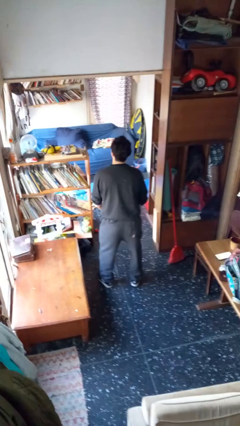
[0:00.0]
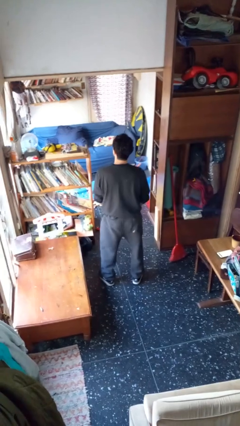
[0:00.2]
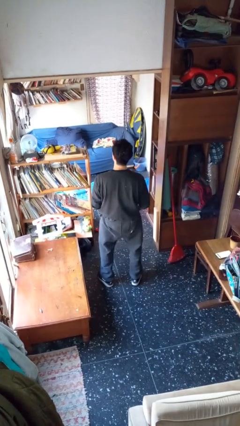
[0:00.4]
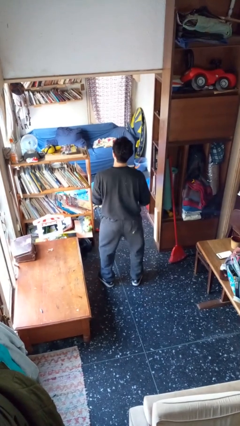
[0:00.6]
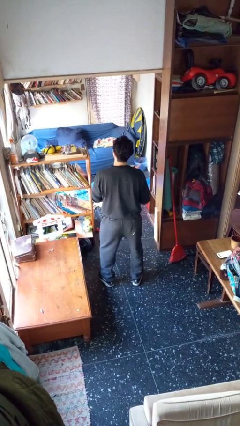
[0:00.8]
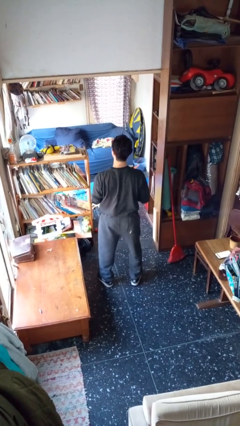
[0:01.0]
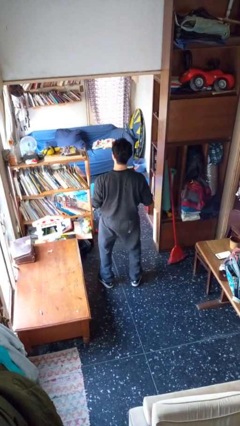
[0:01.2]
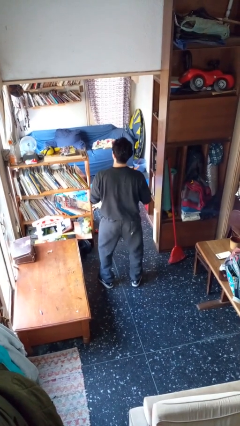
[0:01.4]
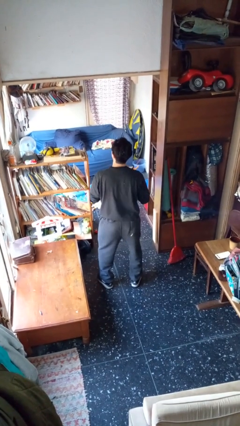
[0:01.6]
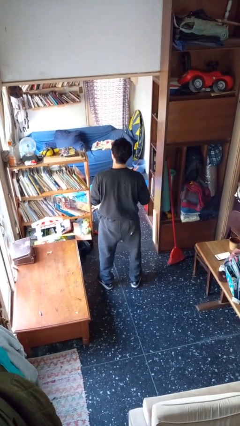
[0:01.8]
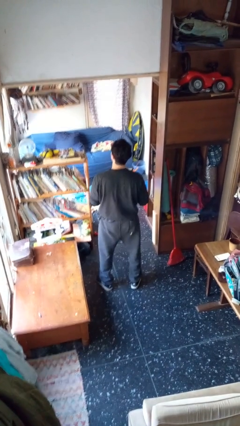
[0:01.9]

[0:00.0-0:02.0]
person wiggles hips

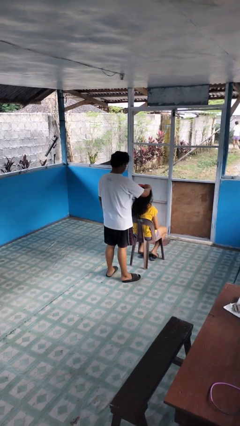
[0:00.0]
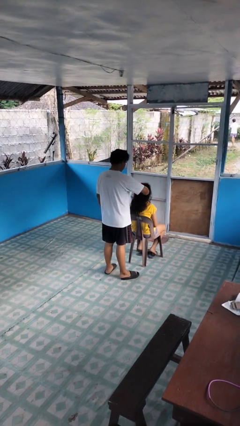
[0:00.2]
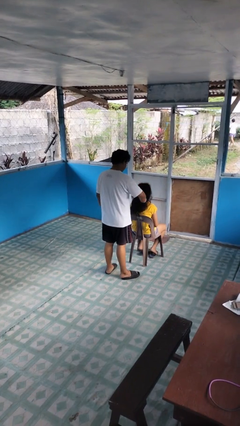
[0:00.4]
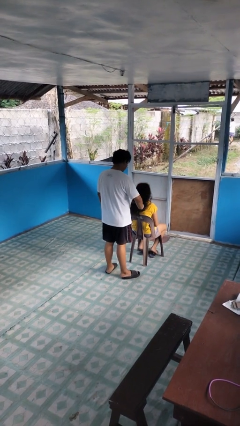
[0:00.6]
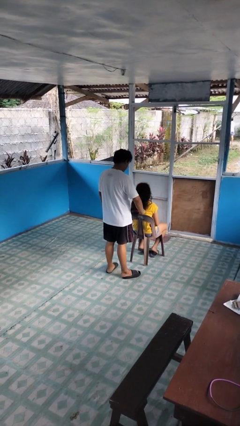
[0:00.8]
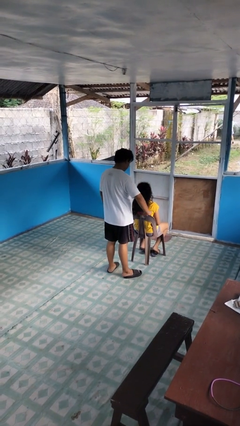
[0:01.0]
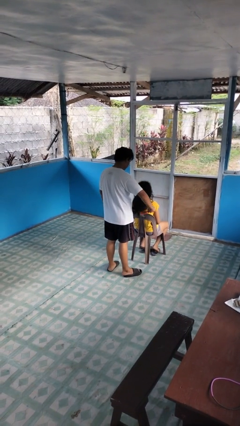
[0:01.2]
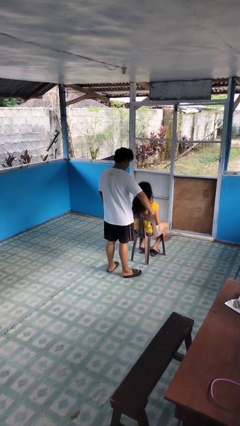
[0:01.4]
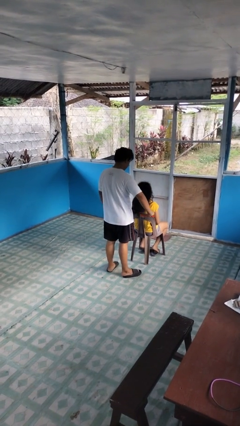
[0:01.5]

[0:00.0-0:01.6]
person brushes hair of person

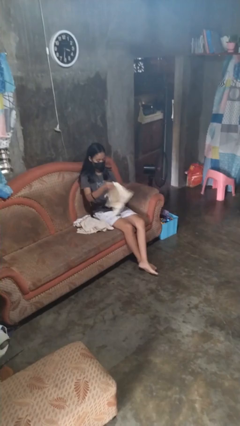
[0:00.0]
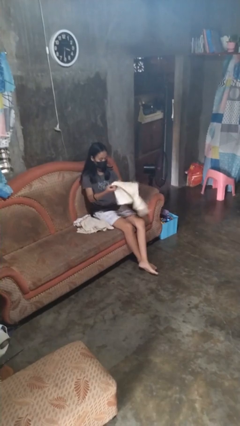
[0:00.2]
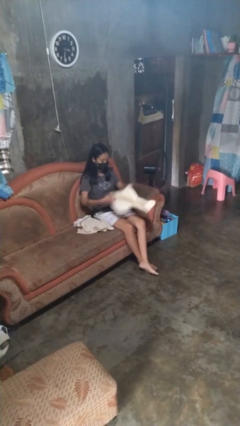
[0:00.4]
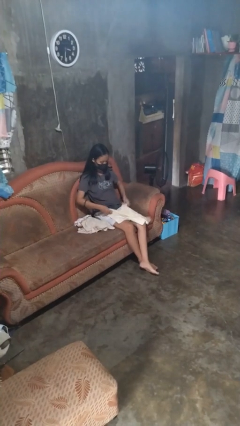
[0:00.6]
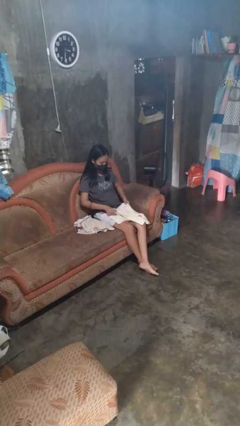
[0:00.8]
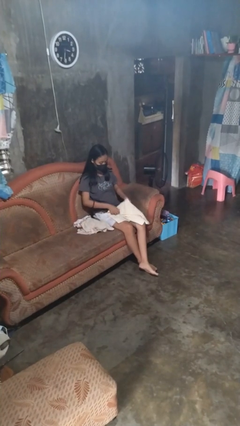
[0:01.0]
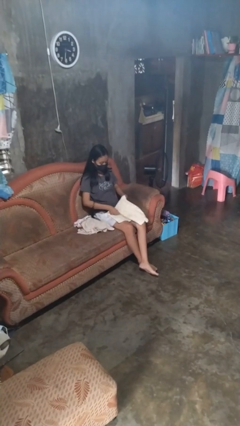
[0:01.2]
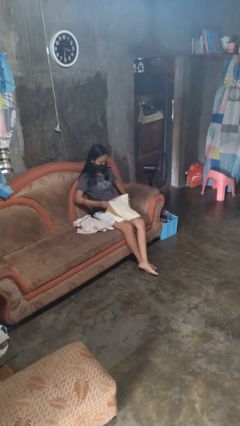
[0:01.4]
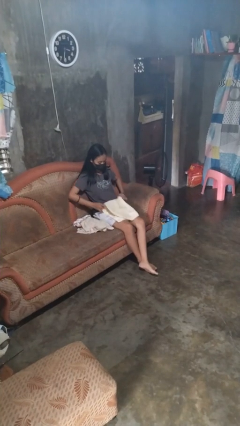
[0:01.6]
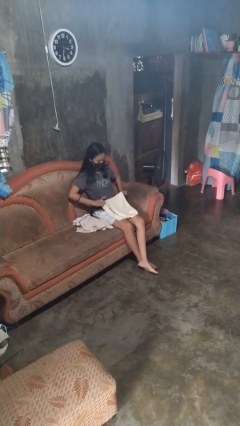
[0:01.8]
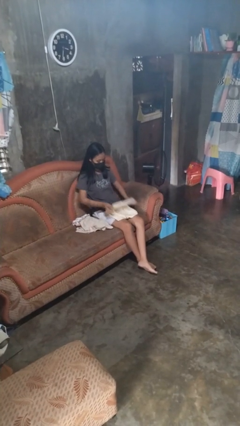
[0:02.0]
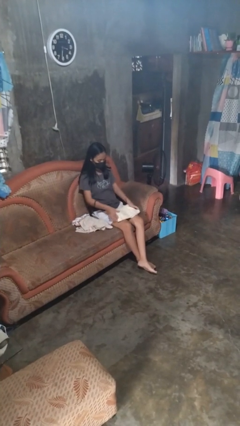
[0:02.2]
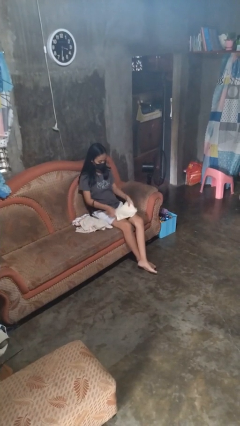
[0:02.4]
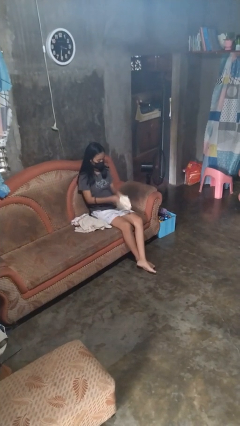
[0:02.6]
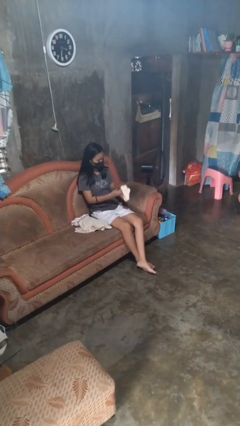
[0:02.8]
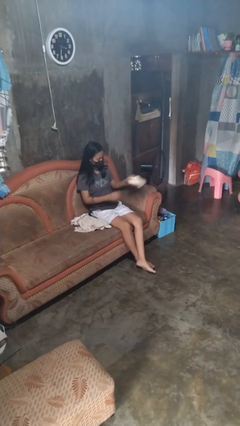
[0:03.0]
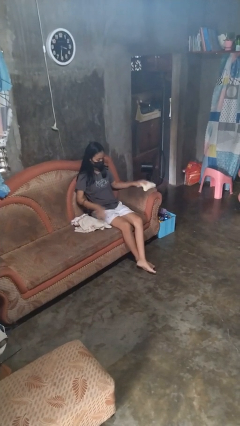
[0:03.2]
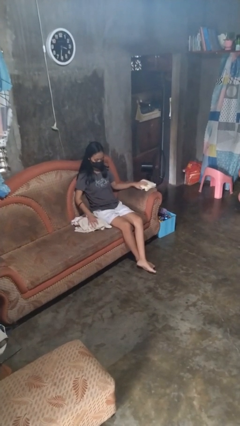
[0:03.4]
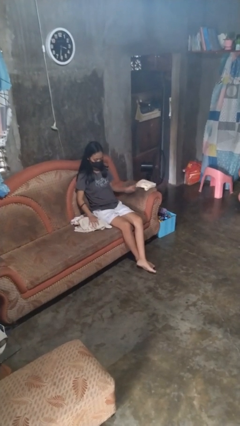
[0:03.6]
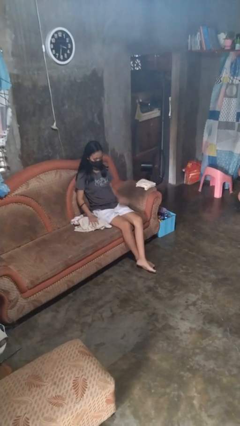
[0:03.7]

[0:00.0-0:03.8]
person folds towel

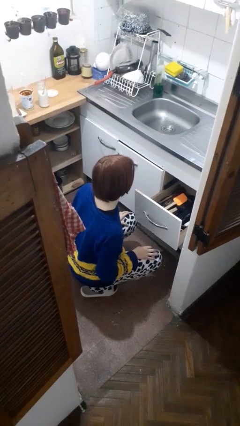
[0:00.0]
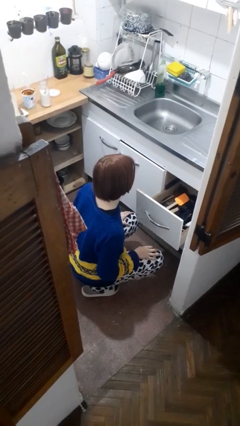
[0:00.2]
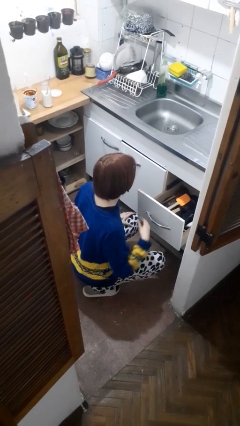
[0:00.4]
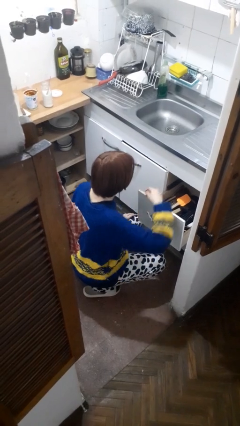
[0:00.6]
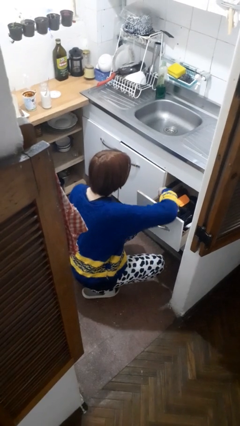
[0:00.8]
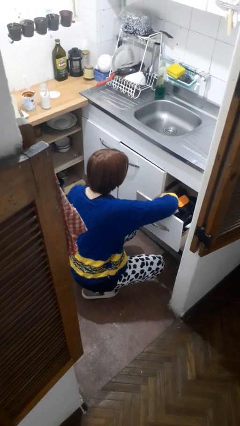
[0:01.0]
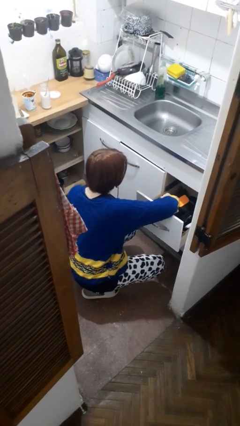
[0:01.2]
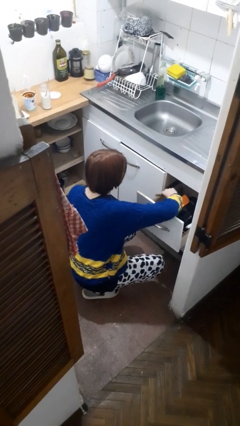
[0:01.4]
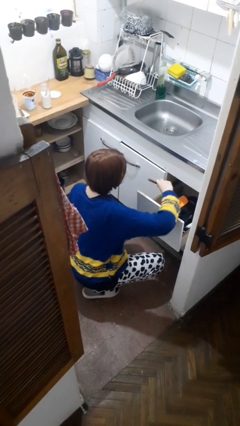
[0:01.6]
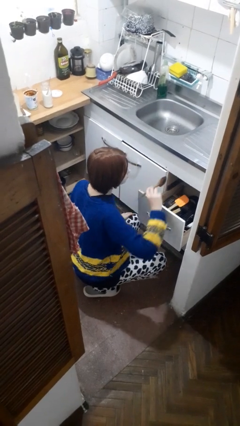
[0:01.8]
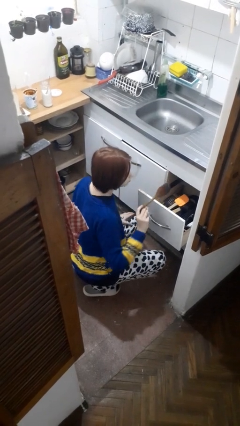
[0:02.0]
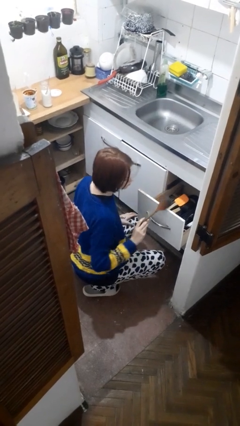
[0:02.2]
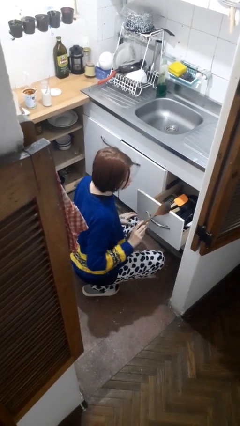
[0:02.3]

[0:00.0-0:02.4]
person takes object from kitchen drawer

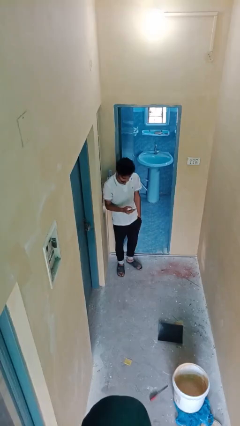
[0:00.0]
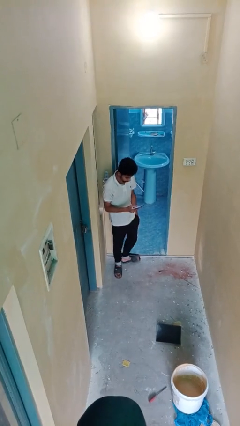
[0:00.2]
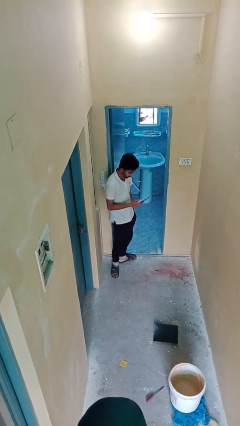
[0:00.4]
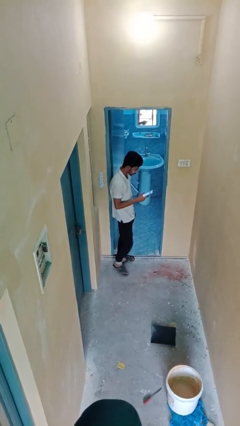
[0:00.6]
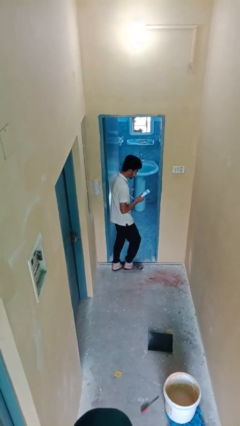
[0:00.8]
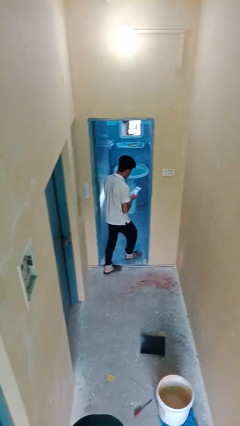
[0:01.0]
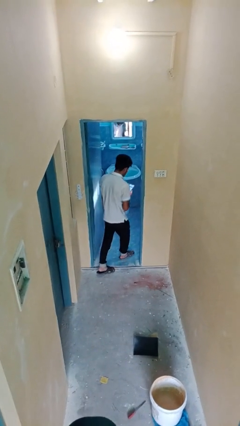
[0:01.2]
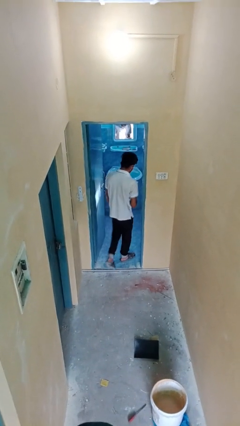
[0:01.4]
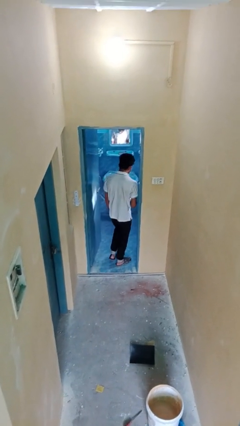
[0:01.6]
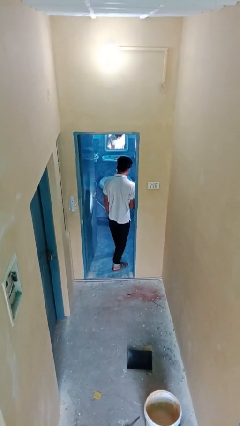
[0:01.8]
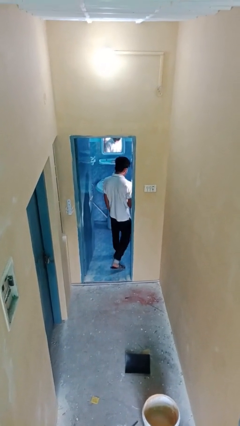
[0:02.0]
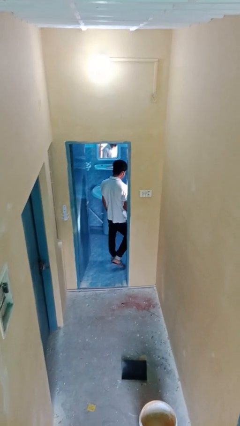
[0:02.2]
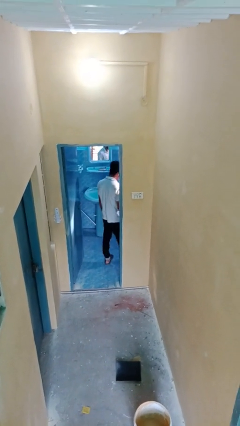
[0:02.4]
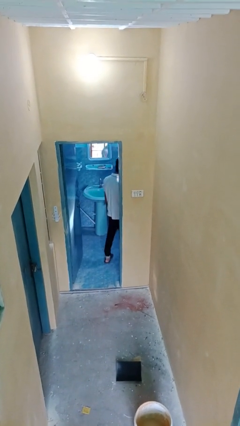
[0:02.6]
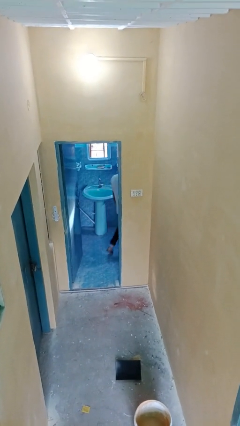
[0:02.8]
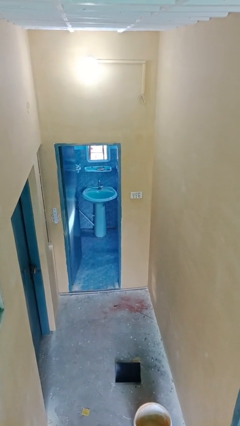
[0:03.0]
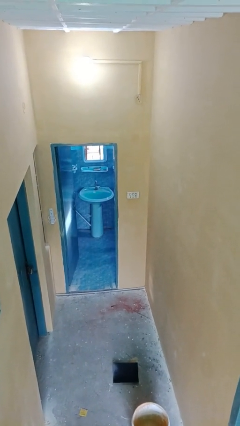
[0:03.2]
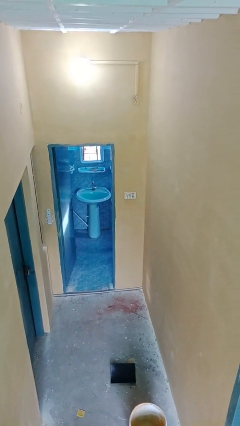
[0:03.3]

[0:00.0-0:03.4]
person exits scene through structure

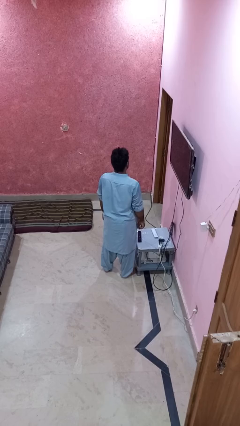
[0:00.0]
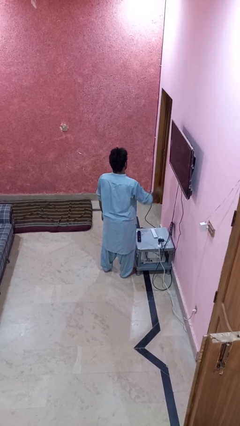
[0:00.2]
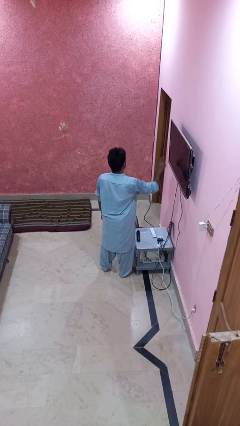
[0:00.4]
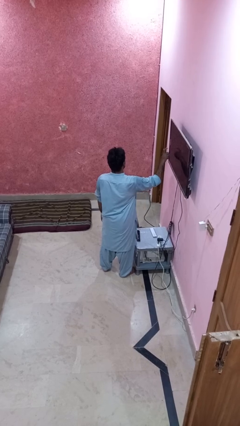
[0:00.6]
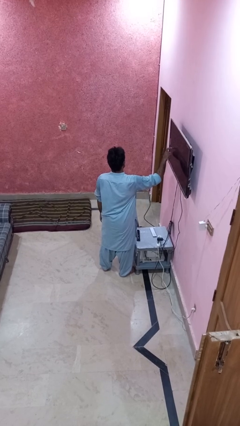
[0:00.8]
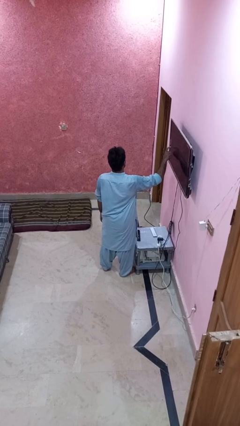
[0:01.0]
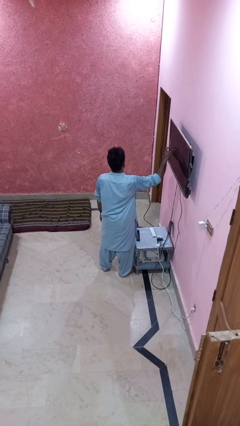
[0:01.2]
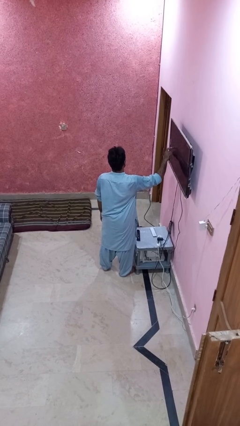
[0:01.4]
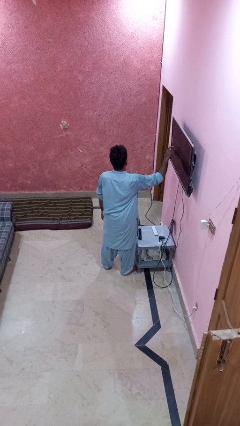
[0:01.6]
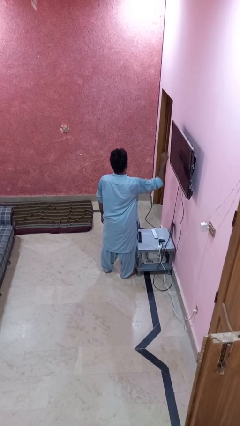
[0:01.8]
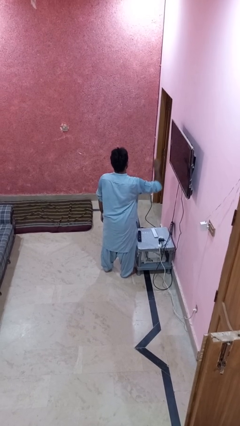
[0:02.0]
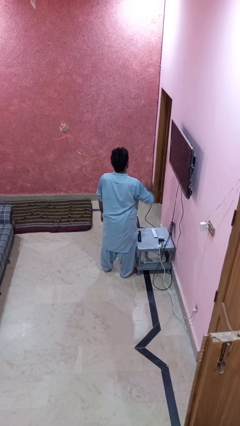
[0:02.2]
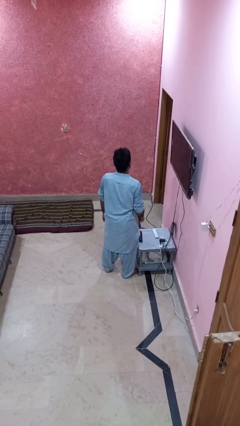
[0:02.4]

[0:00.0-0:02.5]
person taps object with finger

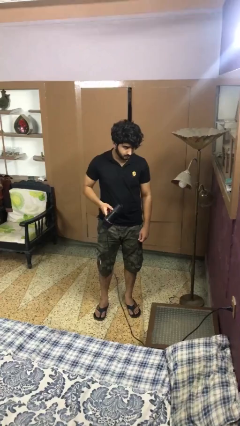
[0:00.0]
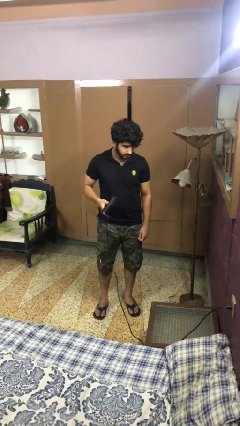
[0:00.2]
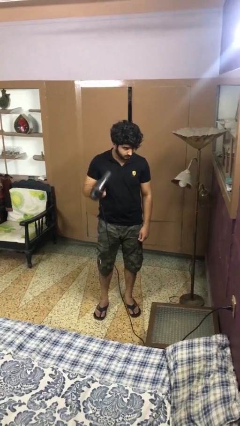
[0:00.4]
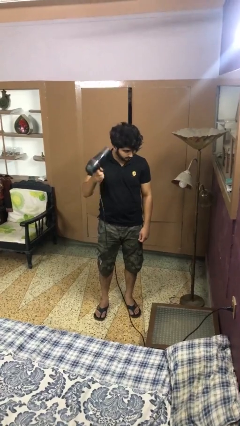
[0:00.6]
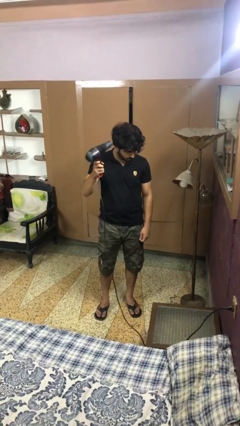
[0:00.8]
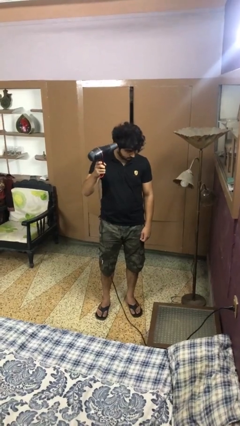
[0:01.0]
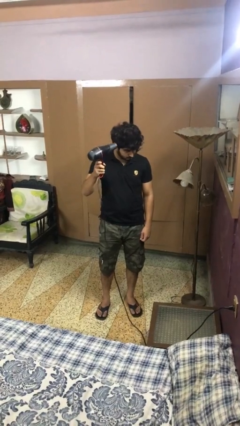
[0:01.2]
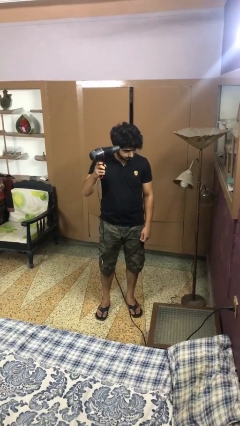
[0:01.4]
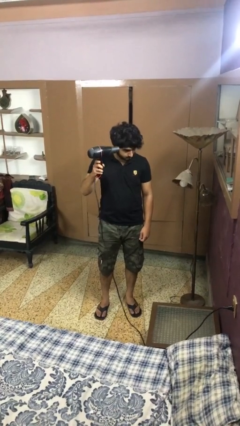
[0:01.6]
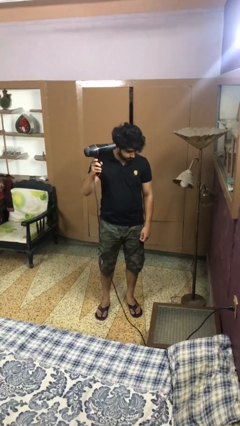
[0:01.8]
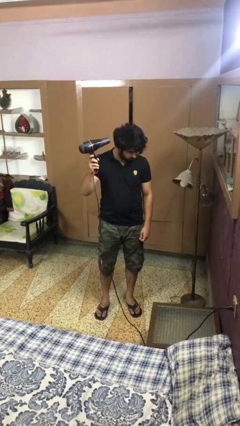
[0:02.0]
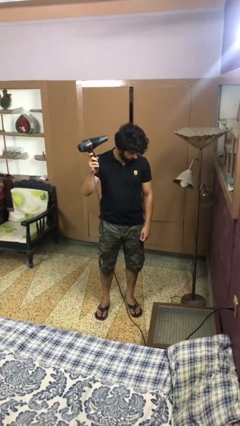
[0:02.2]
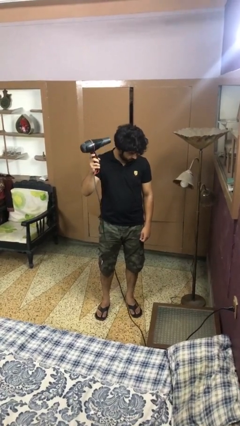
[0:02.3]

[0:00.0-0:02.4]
person dries hair with hairdryer
